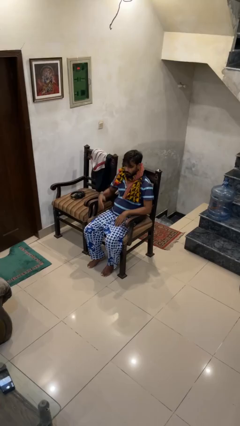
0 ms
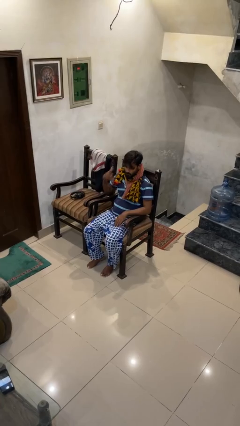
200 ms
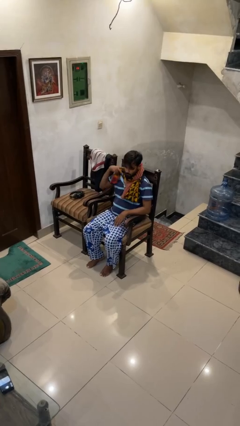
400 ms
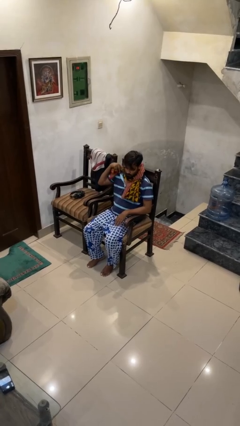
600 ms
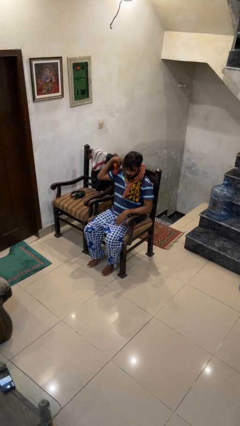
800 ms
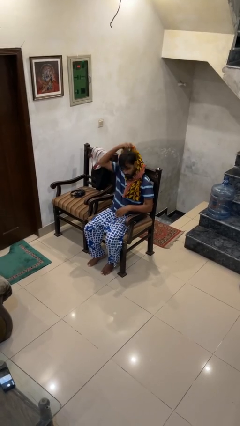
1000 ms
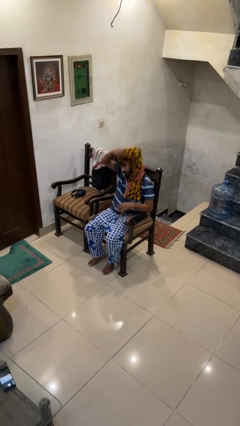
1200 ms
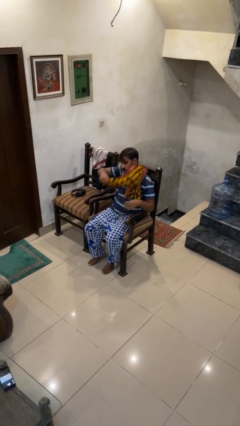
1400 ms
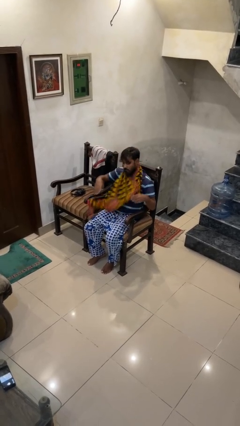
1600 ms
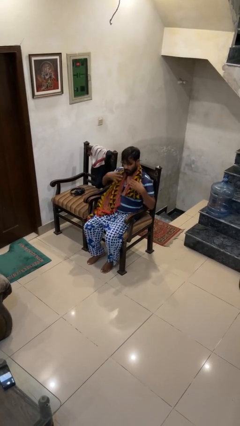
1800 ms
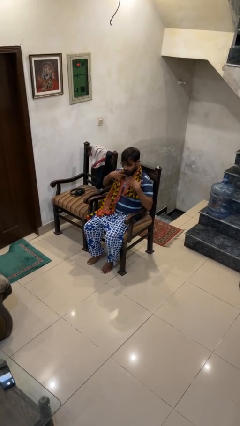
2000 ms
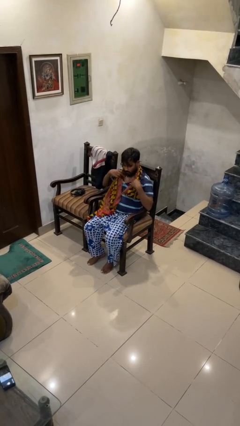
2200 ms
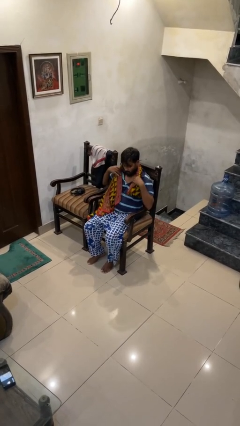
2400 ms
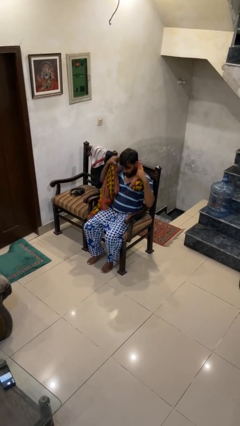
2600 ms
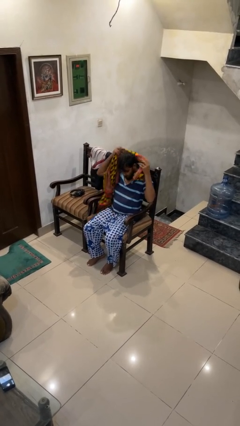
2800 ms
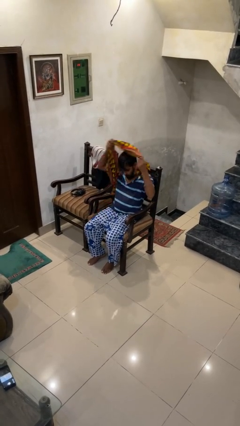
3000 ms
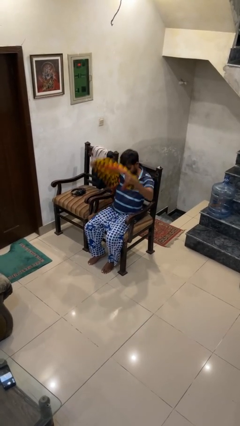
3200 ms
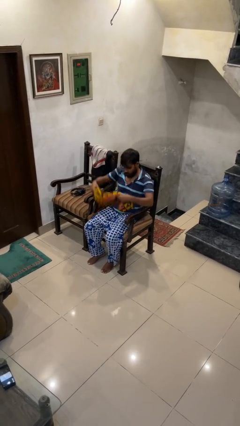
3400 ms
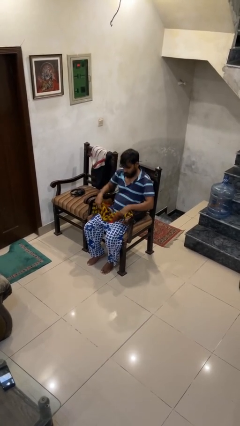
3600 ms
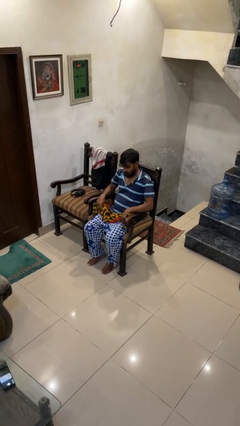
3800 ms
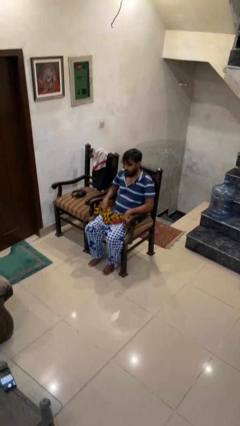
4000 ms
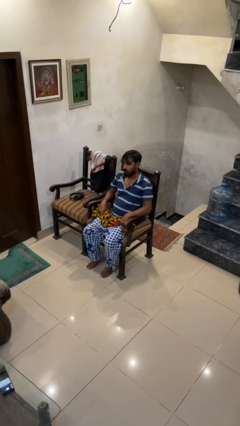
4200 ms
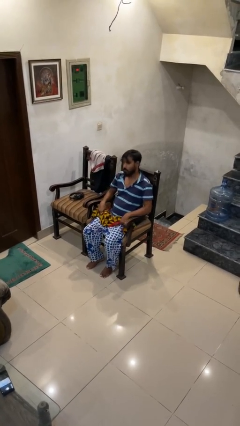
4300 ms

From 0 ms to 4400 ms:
person takes off scarf

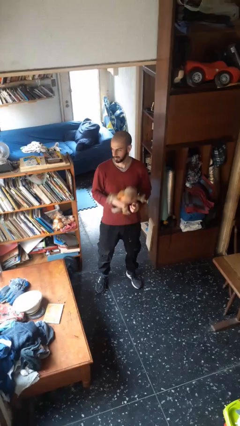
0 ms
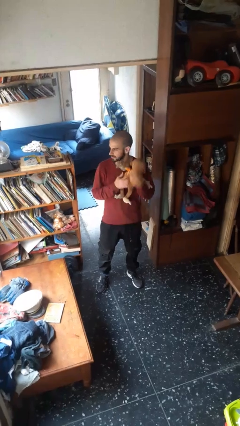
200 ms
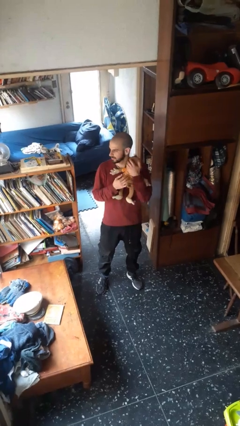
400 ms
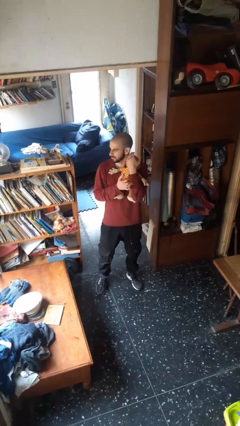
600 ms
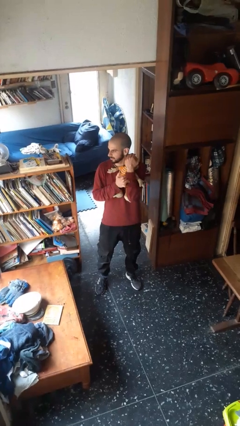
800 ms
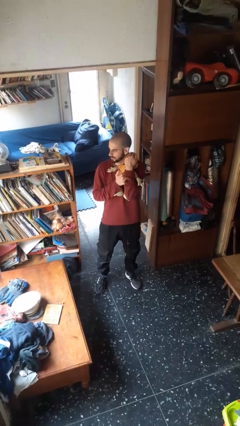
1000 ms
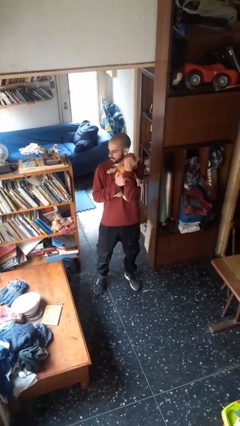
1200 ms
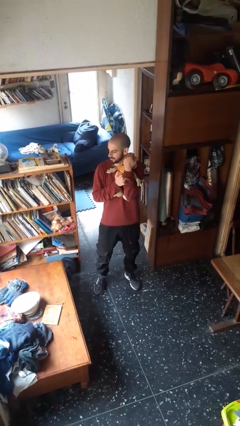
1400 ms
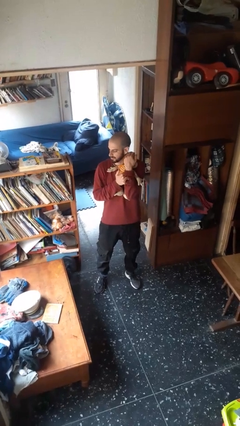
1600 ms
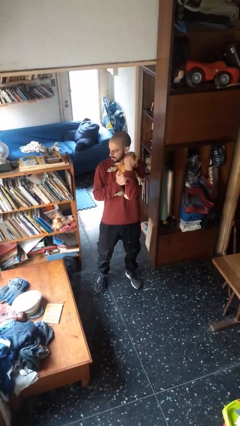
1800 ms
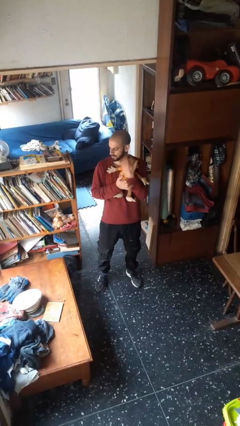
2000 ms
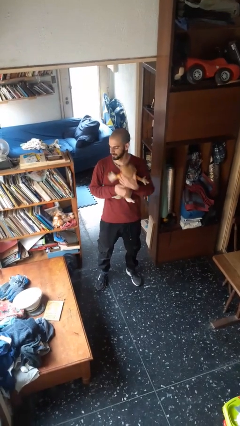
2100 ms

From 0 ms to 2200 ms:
person hugs stuffed animal

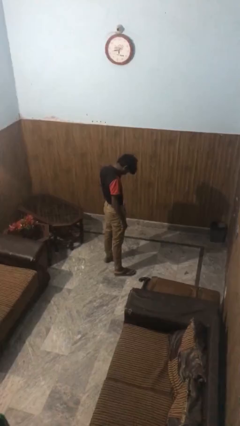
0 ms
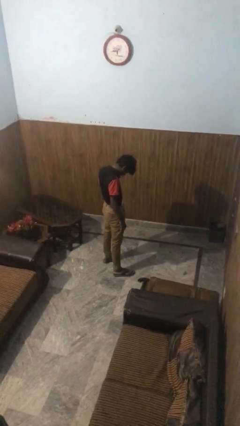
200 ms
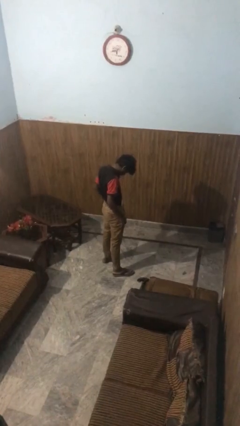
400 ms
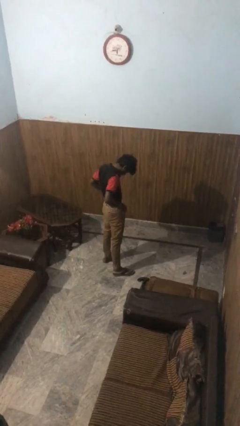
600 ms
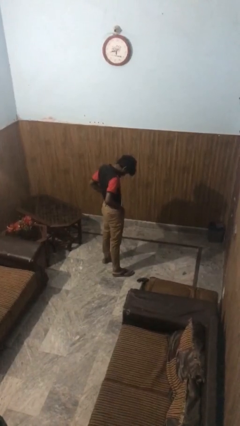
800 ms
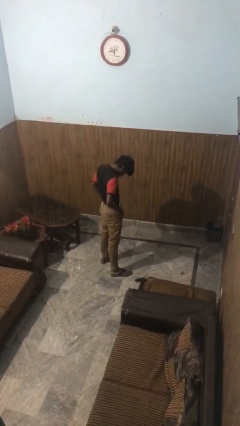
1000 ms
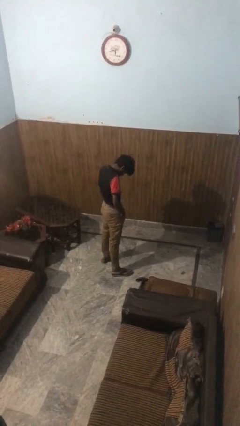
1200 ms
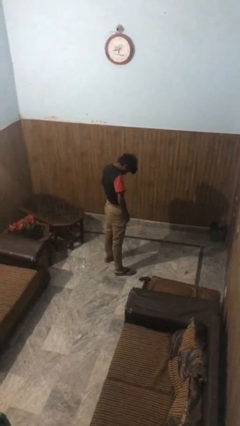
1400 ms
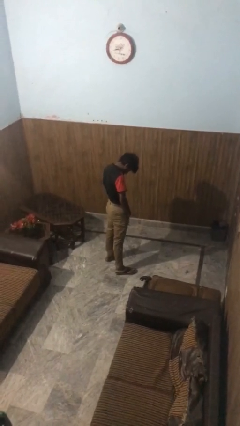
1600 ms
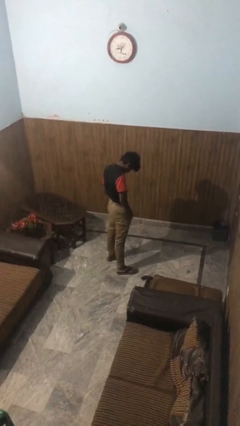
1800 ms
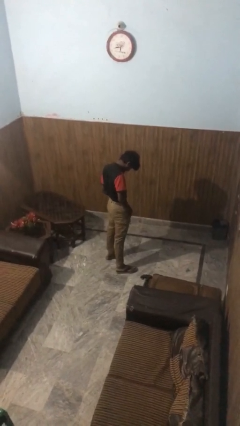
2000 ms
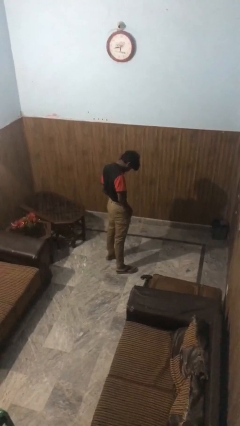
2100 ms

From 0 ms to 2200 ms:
person puts hands in back pockets

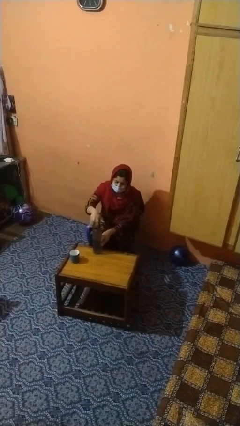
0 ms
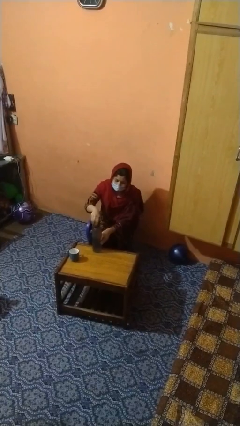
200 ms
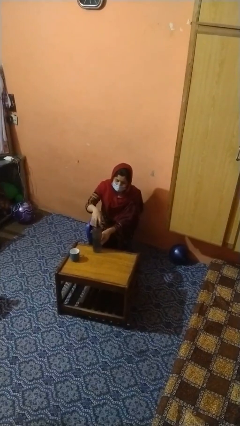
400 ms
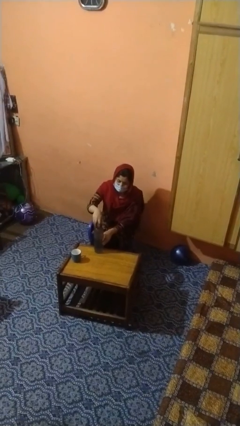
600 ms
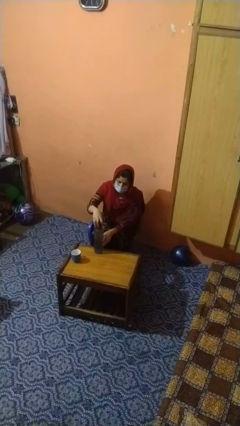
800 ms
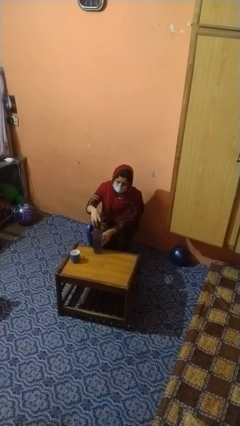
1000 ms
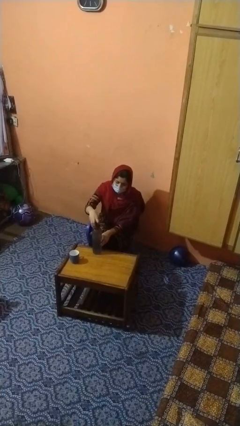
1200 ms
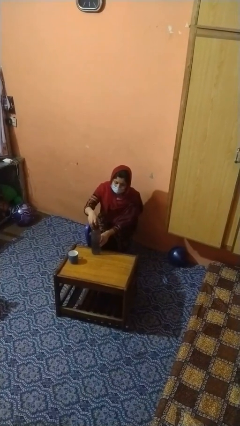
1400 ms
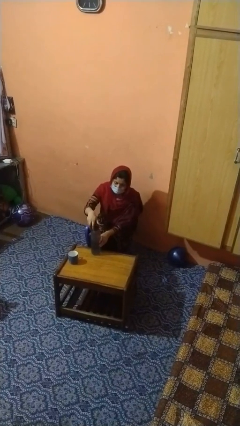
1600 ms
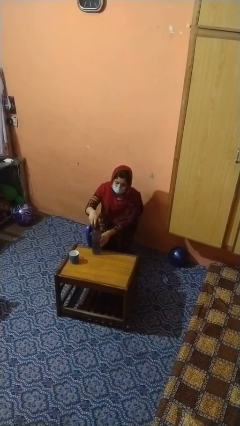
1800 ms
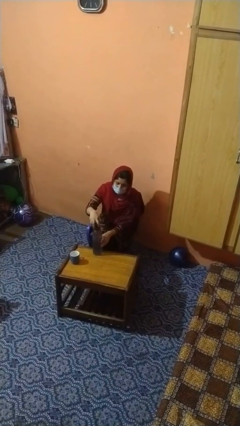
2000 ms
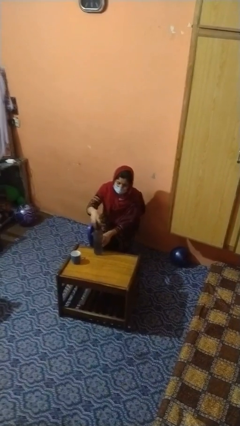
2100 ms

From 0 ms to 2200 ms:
person unscrews lid from bottle

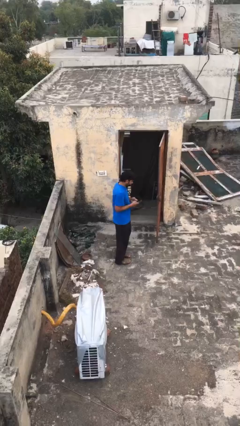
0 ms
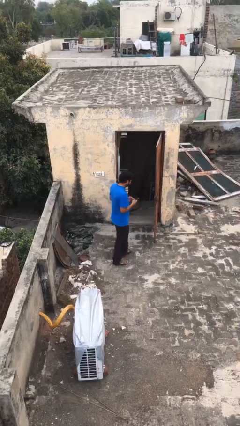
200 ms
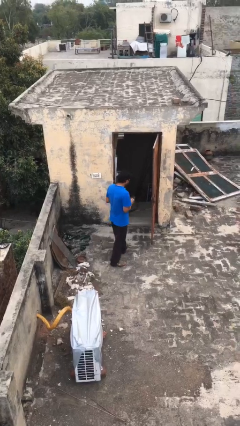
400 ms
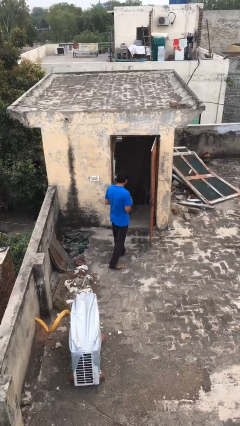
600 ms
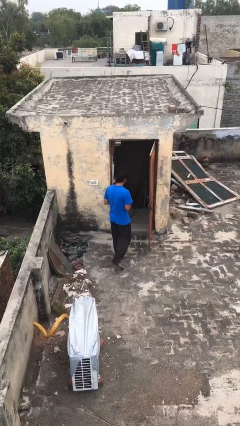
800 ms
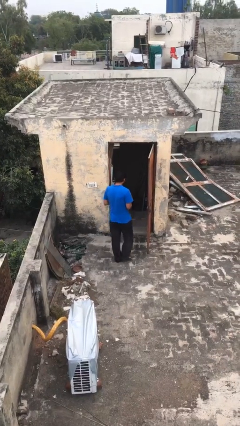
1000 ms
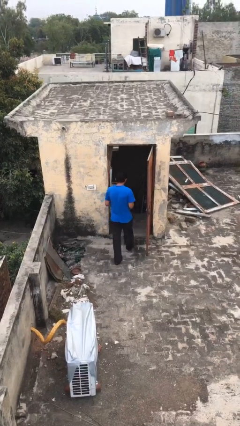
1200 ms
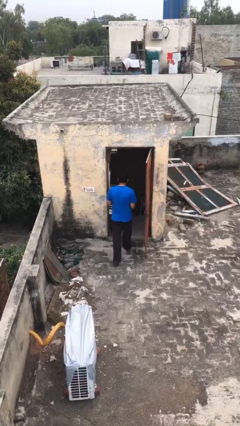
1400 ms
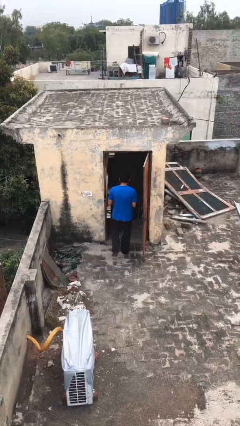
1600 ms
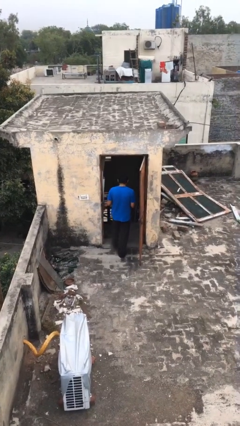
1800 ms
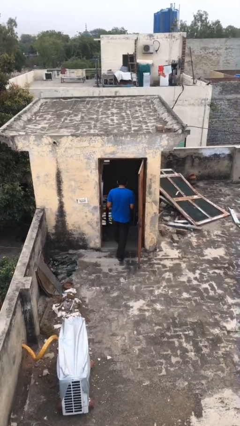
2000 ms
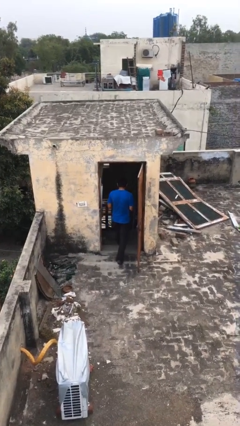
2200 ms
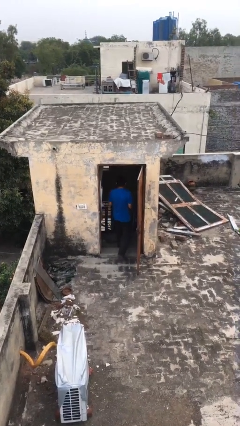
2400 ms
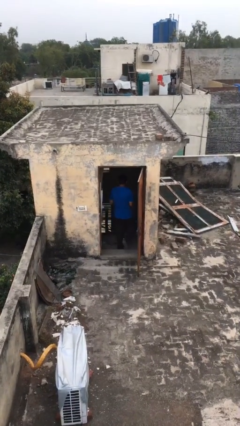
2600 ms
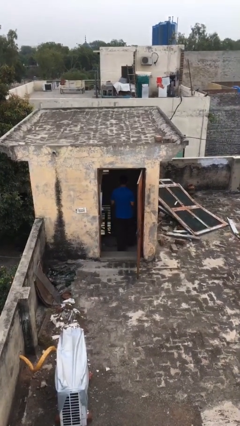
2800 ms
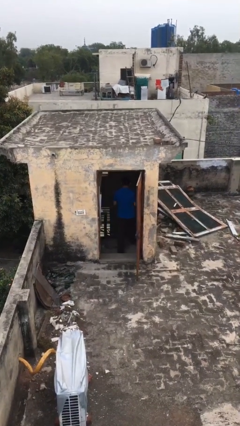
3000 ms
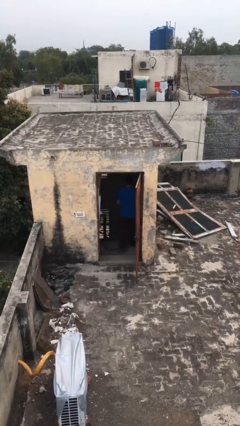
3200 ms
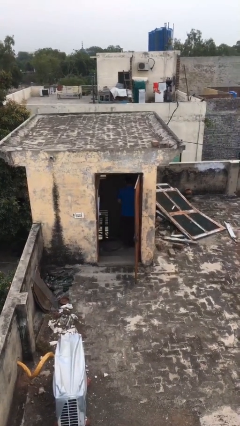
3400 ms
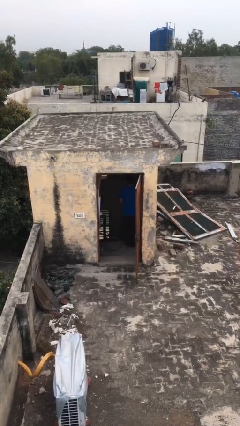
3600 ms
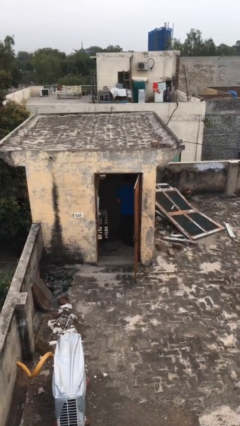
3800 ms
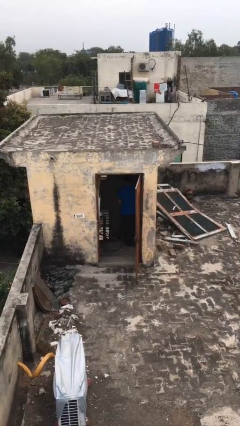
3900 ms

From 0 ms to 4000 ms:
person exits scene through structure

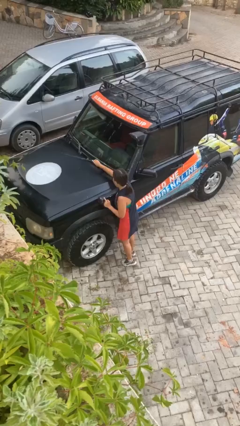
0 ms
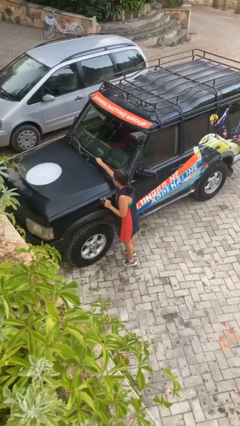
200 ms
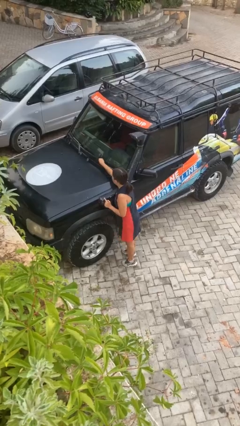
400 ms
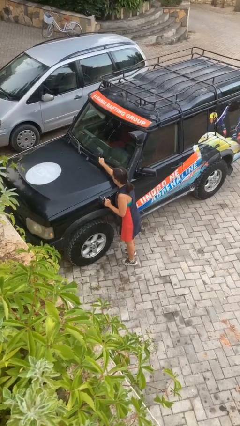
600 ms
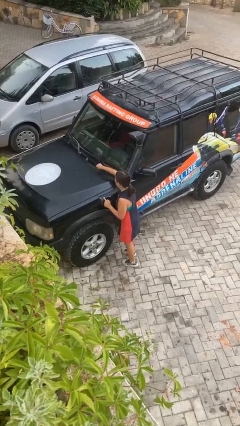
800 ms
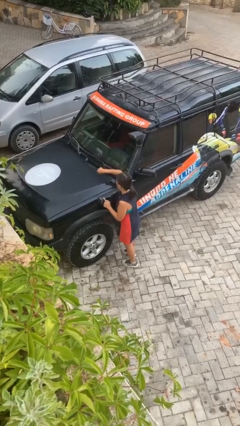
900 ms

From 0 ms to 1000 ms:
person flips down car wipers

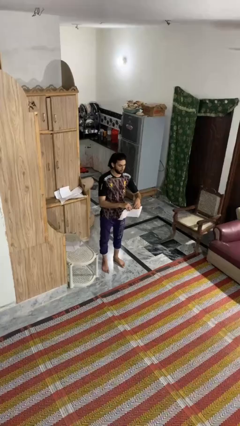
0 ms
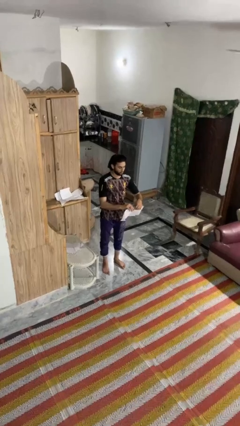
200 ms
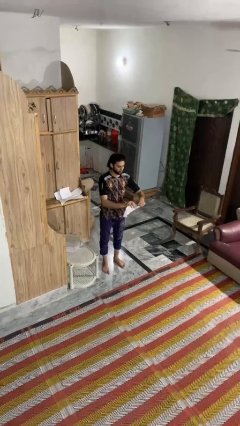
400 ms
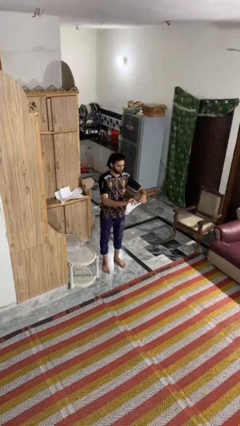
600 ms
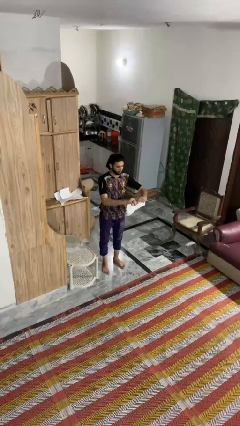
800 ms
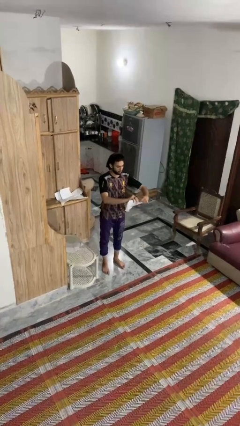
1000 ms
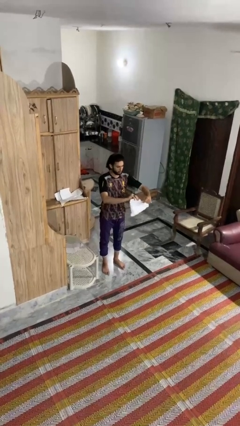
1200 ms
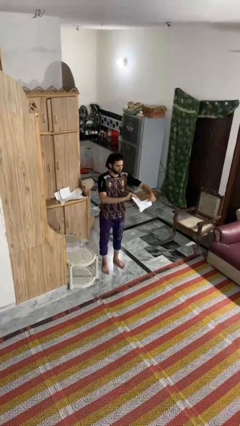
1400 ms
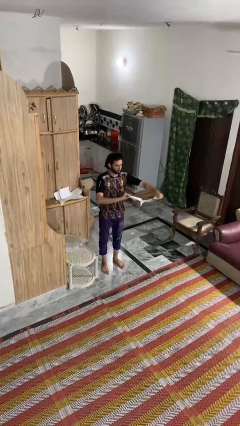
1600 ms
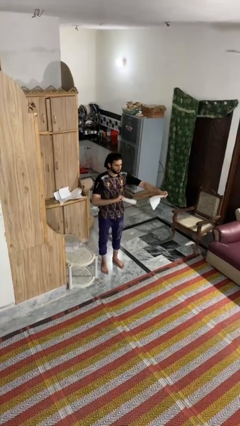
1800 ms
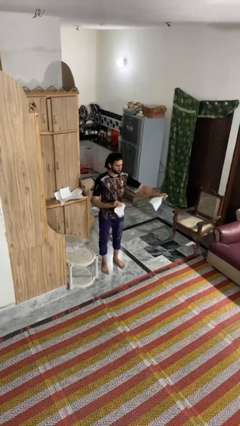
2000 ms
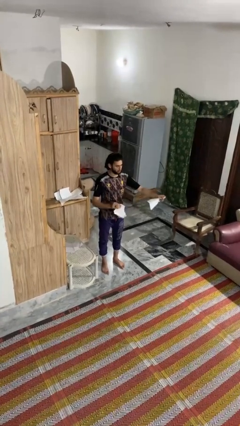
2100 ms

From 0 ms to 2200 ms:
person tears paper
